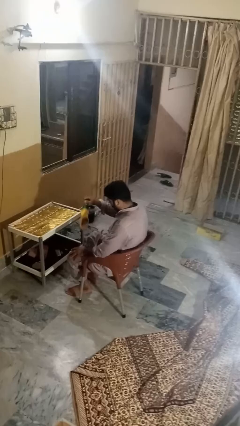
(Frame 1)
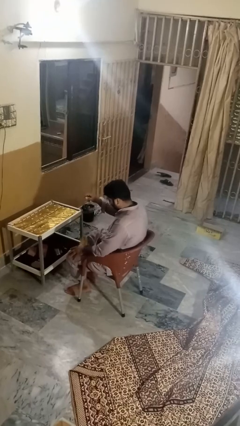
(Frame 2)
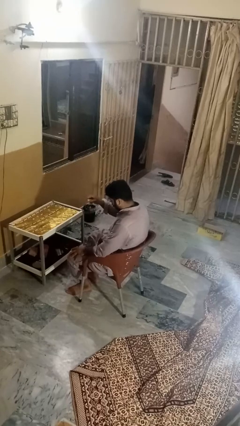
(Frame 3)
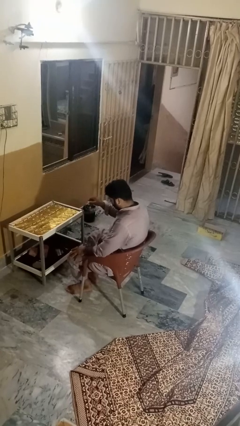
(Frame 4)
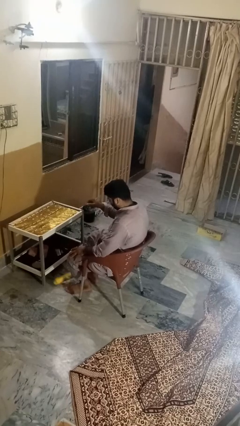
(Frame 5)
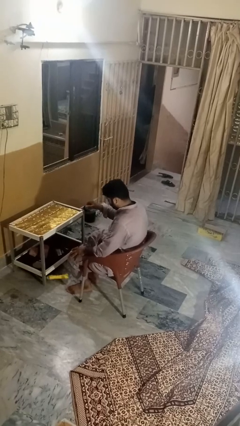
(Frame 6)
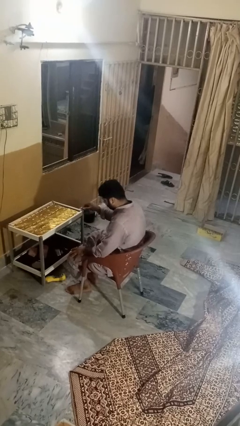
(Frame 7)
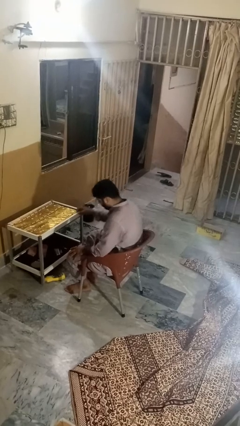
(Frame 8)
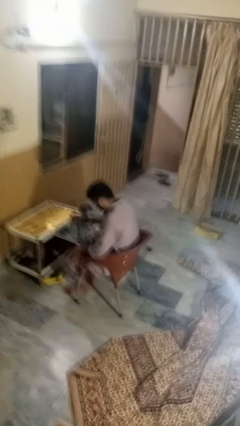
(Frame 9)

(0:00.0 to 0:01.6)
person throws object to ground

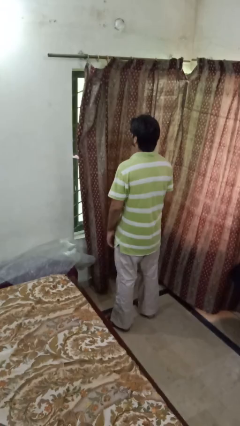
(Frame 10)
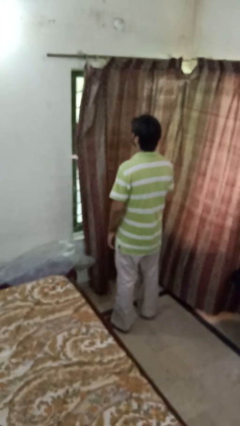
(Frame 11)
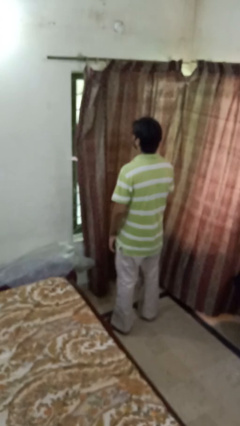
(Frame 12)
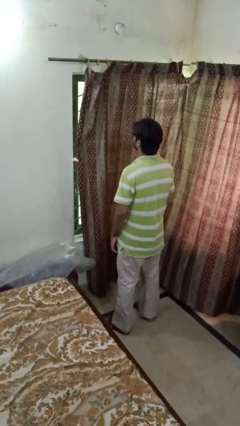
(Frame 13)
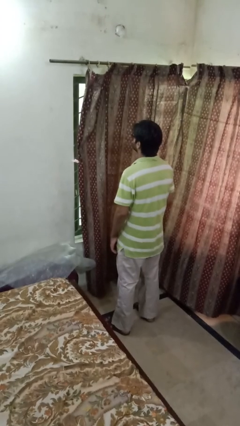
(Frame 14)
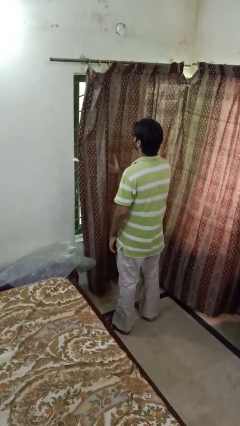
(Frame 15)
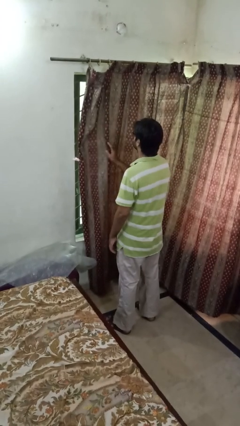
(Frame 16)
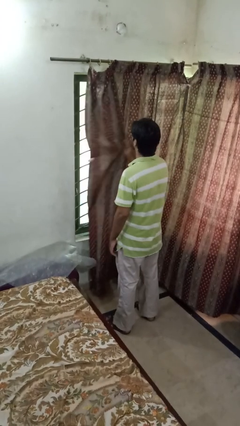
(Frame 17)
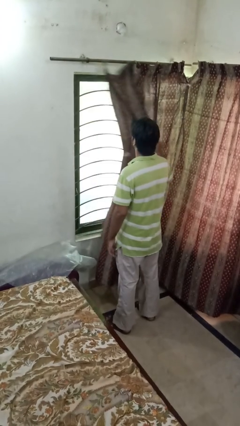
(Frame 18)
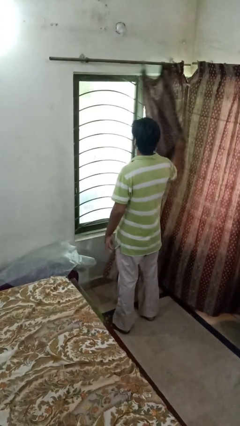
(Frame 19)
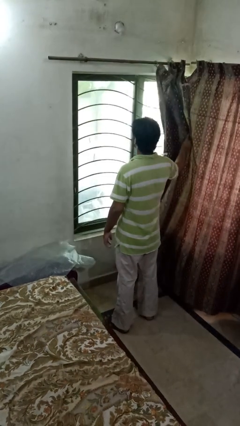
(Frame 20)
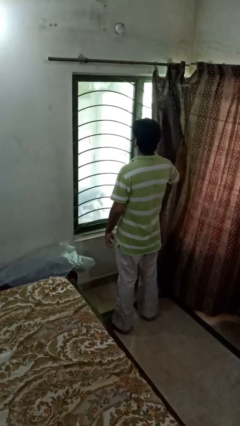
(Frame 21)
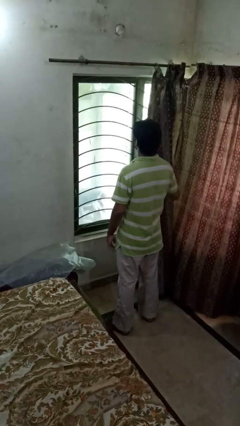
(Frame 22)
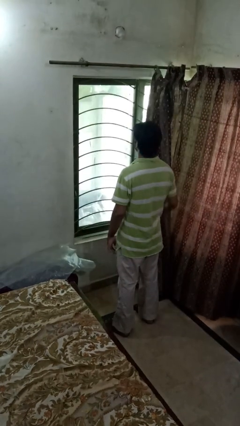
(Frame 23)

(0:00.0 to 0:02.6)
person opens curtains

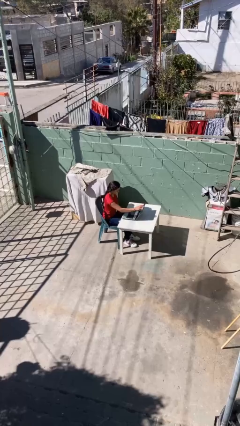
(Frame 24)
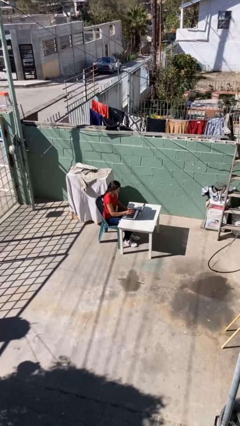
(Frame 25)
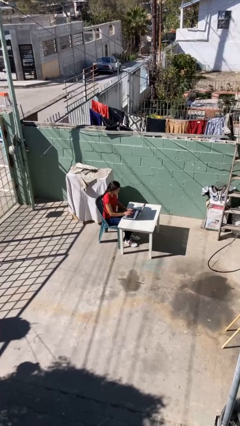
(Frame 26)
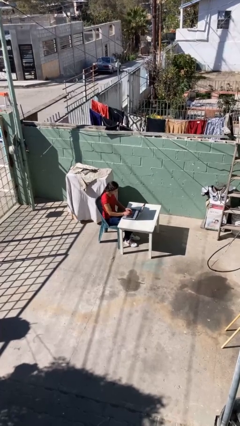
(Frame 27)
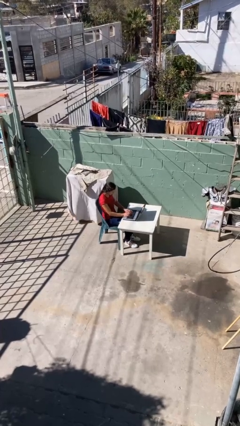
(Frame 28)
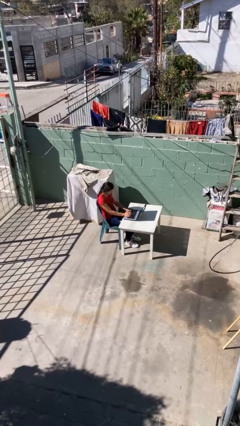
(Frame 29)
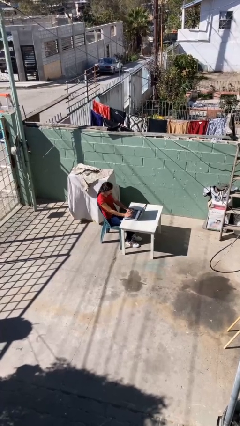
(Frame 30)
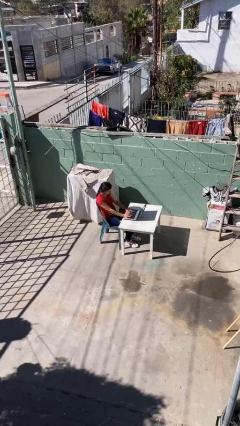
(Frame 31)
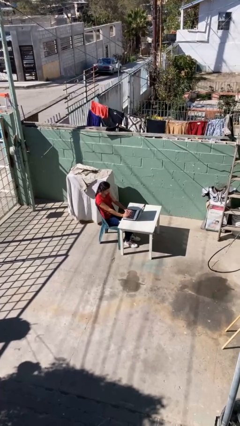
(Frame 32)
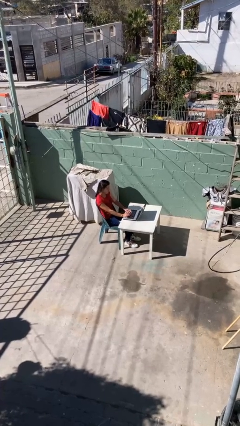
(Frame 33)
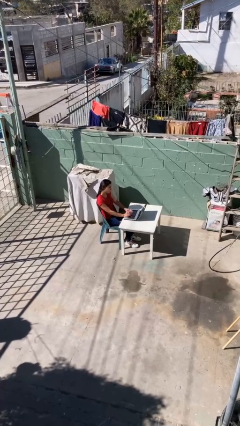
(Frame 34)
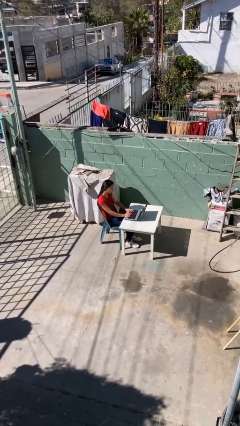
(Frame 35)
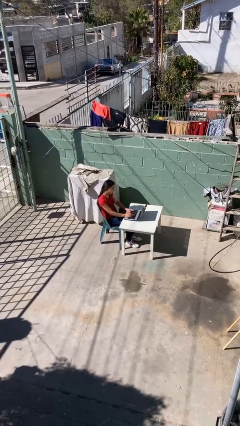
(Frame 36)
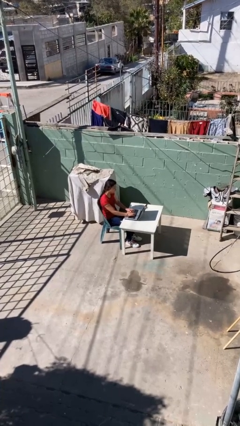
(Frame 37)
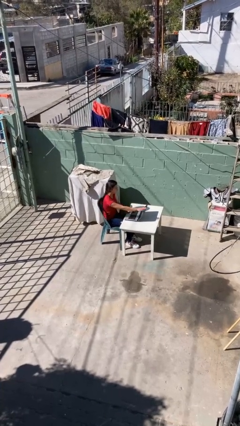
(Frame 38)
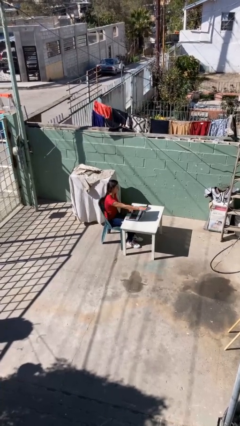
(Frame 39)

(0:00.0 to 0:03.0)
person interacts with laptop

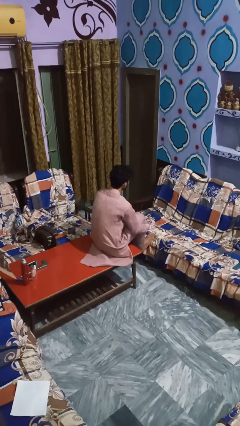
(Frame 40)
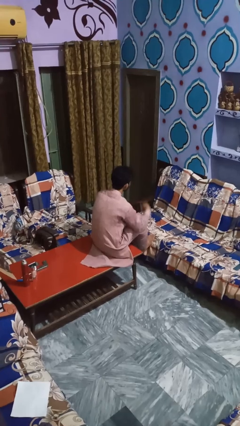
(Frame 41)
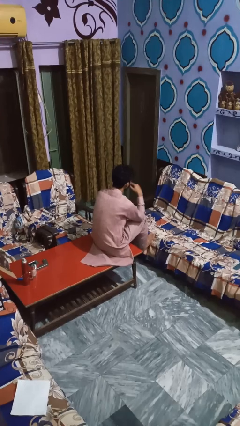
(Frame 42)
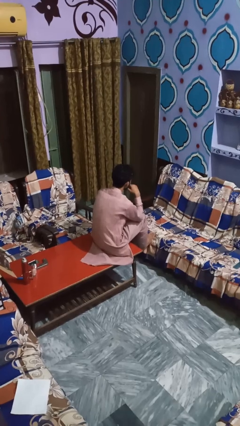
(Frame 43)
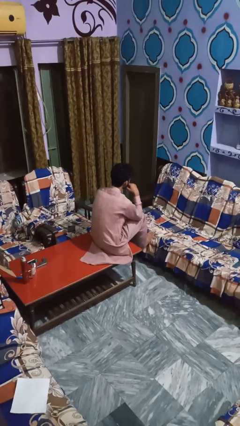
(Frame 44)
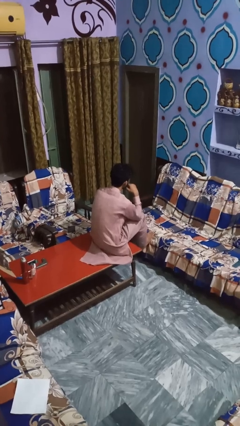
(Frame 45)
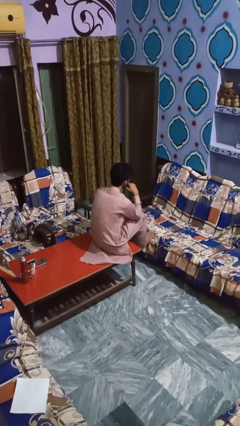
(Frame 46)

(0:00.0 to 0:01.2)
person licks fingers

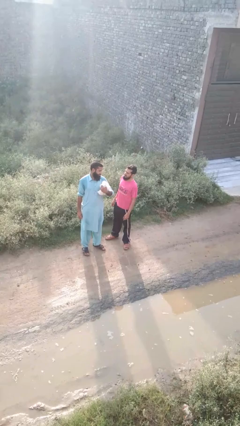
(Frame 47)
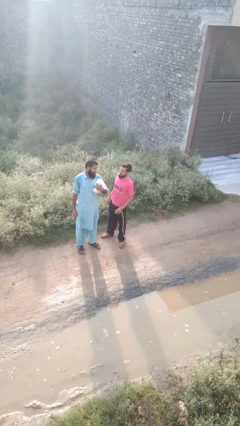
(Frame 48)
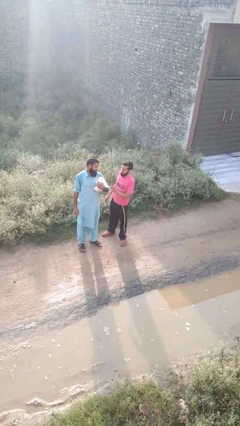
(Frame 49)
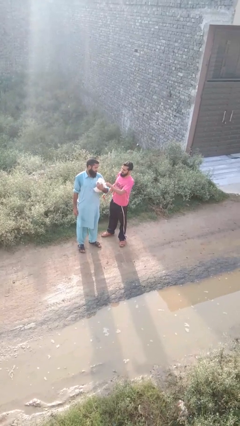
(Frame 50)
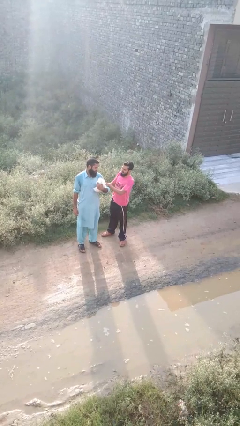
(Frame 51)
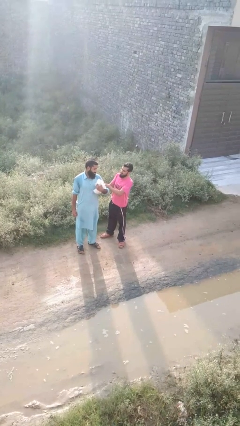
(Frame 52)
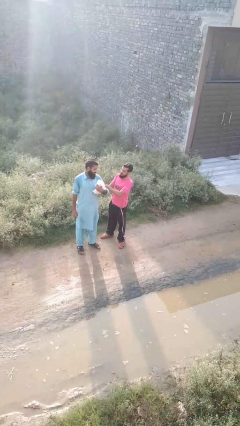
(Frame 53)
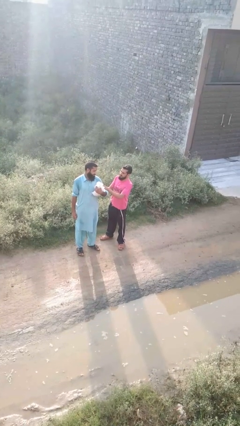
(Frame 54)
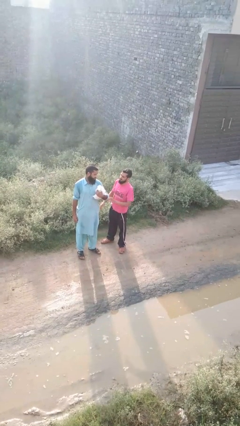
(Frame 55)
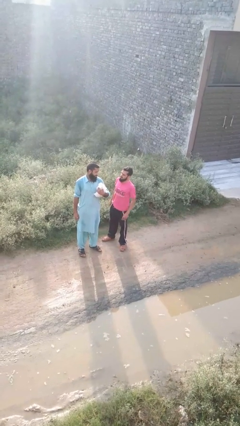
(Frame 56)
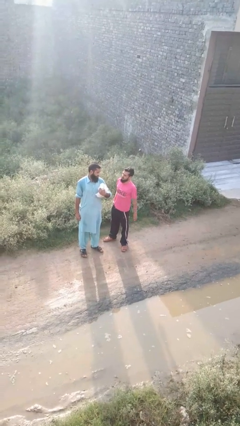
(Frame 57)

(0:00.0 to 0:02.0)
person grabs person by bicep

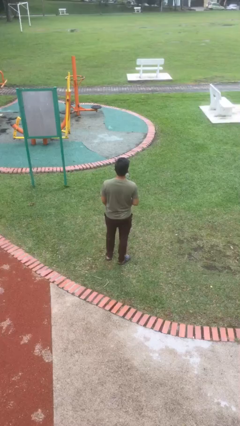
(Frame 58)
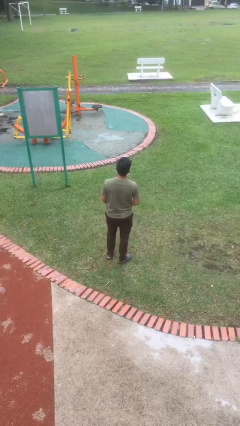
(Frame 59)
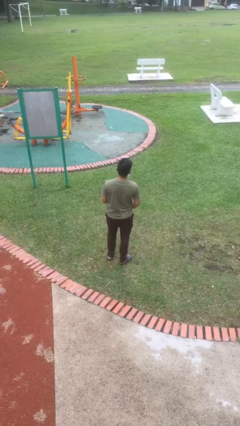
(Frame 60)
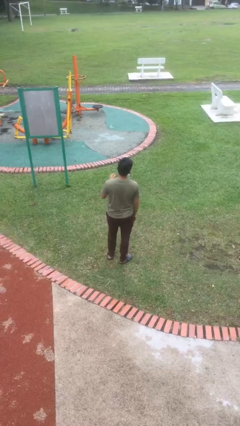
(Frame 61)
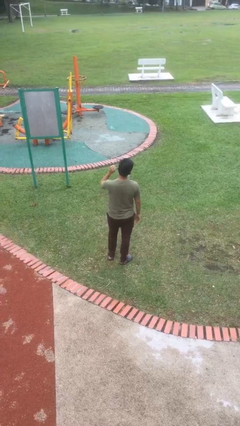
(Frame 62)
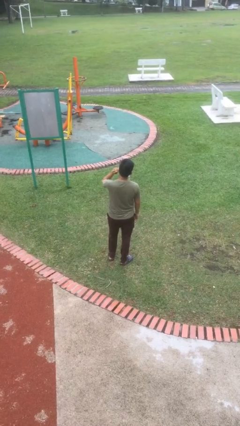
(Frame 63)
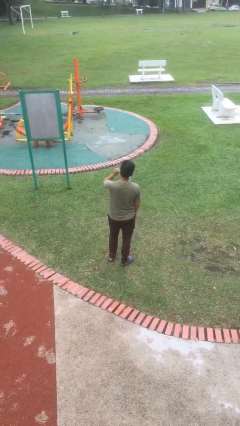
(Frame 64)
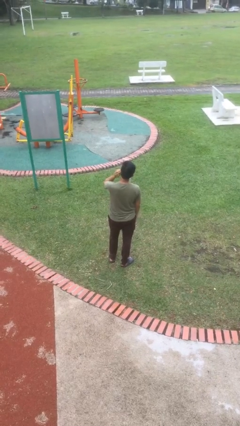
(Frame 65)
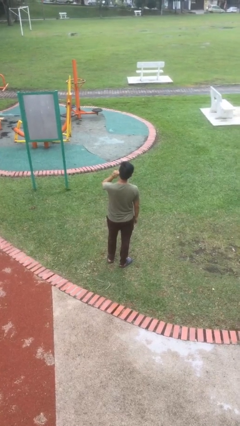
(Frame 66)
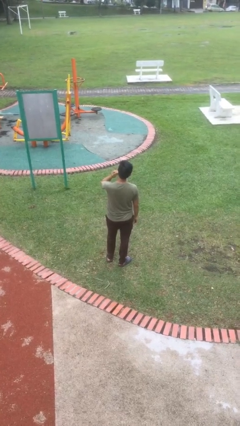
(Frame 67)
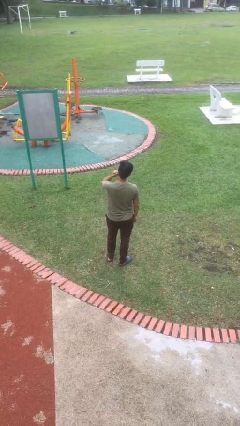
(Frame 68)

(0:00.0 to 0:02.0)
person touches earlobe

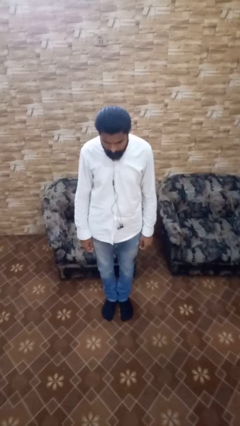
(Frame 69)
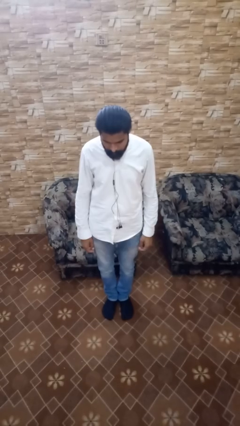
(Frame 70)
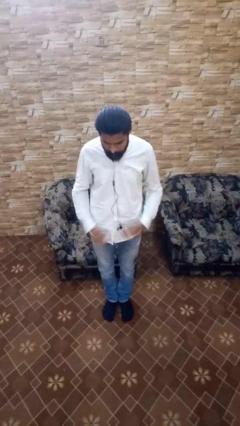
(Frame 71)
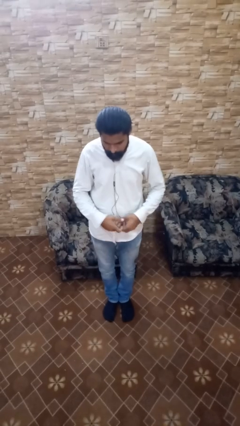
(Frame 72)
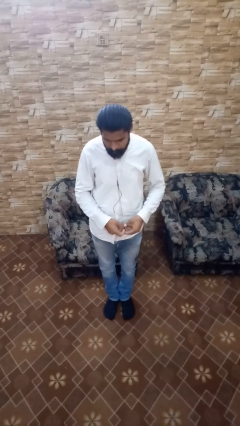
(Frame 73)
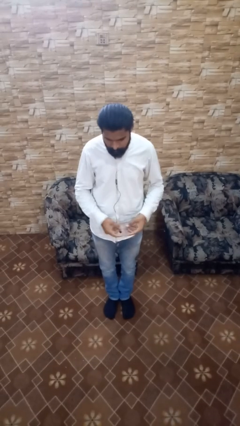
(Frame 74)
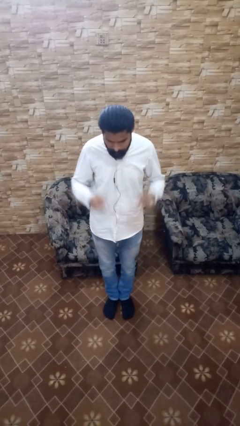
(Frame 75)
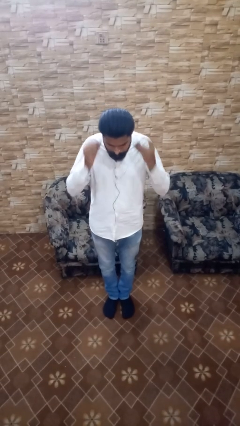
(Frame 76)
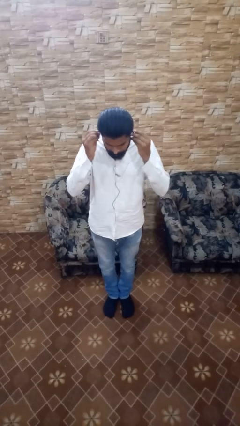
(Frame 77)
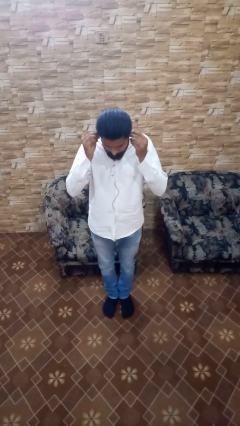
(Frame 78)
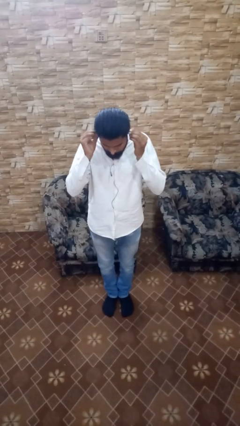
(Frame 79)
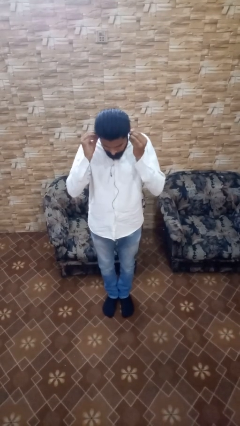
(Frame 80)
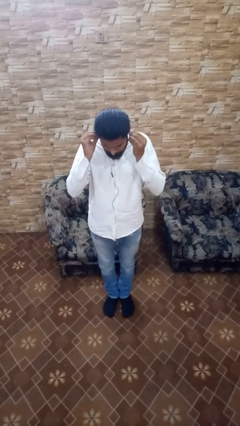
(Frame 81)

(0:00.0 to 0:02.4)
person puts on headphones

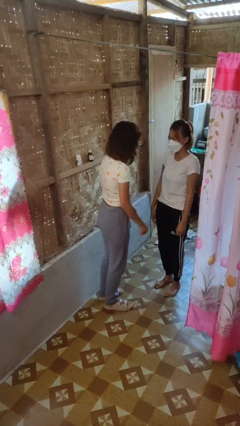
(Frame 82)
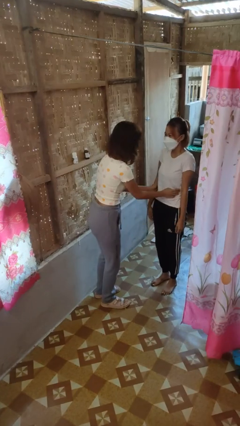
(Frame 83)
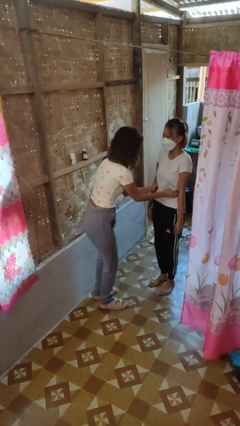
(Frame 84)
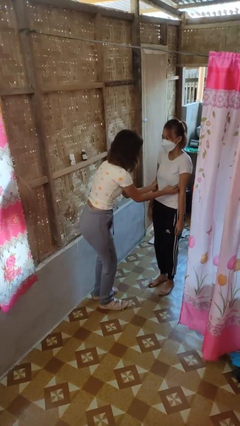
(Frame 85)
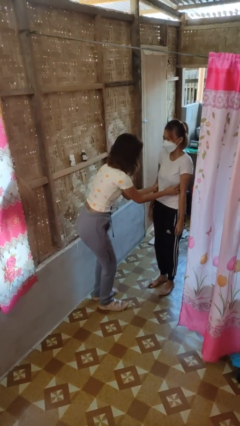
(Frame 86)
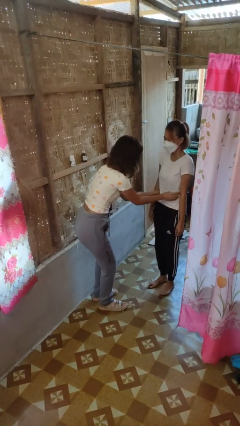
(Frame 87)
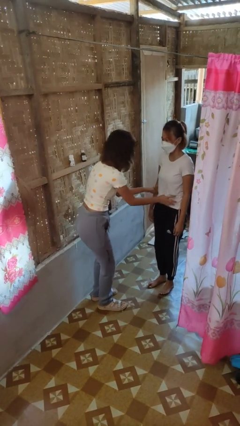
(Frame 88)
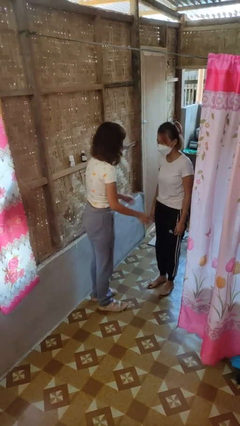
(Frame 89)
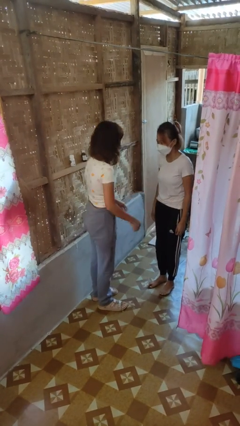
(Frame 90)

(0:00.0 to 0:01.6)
person tickles person

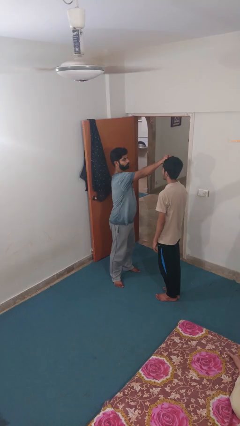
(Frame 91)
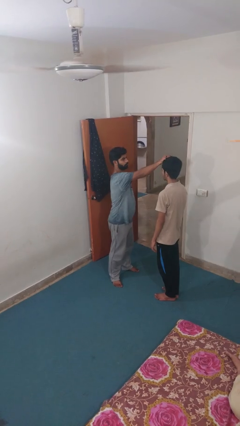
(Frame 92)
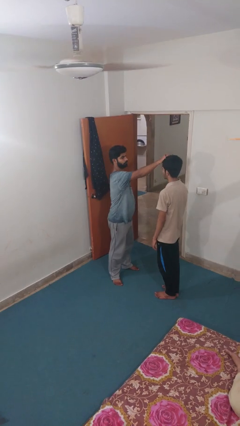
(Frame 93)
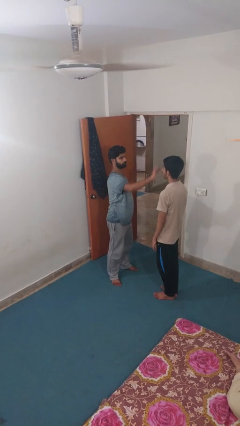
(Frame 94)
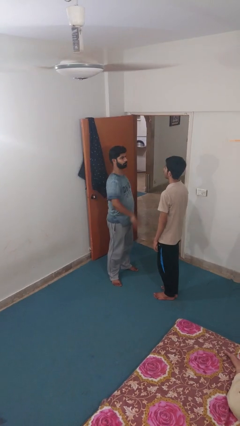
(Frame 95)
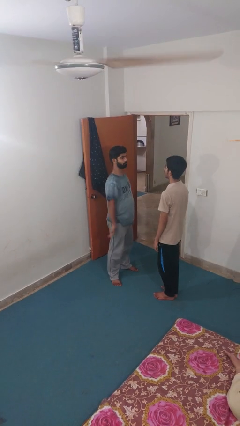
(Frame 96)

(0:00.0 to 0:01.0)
person grabs person by hair
